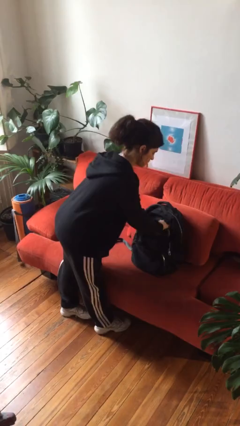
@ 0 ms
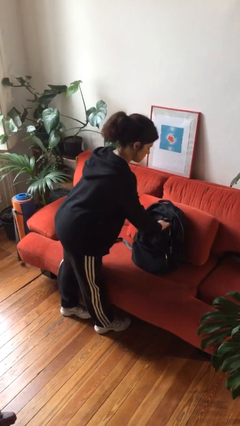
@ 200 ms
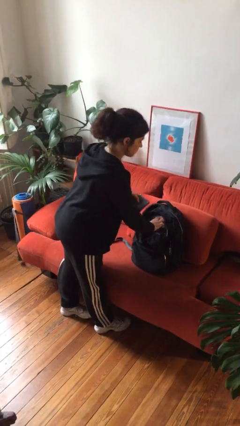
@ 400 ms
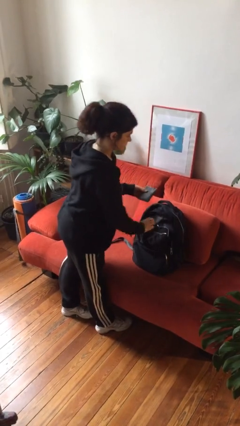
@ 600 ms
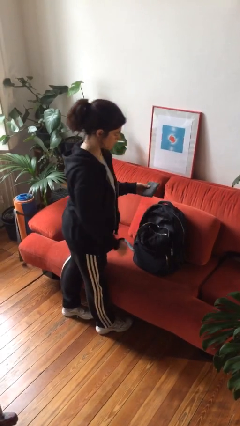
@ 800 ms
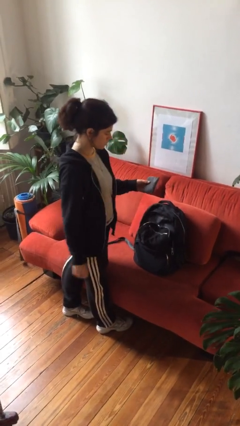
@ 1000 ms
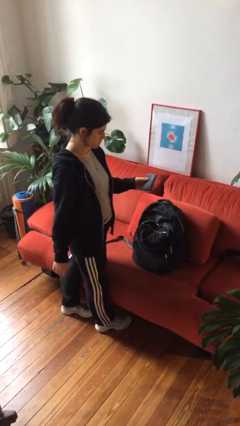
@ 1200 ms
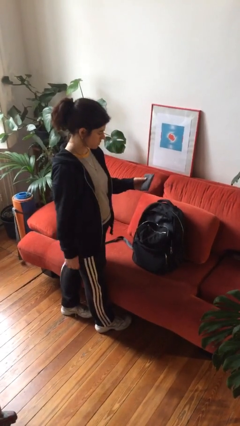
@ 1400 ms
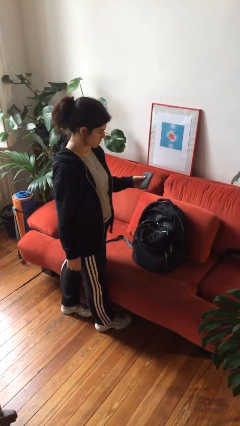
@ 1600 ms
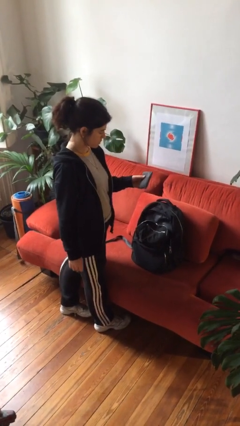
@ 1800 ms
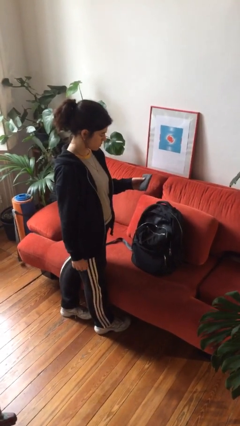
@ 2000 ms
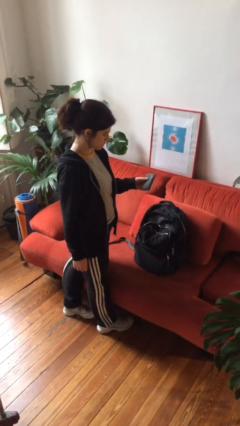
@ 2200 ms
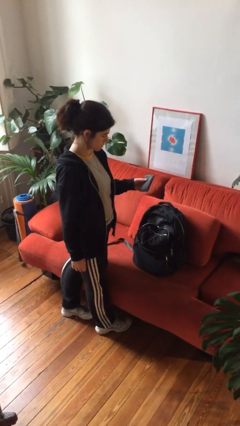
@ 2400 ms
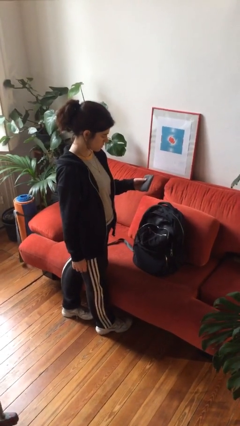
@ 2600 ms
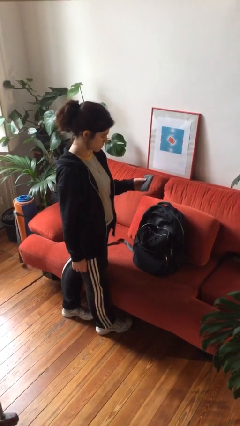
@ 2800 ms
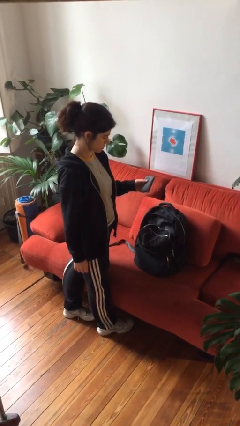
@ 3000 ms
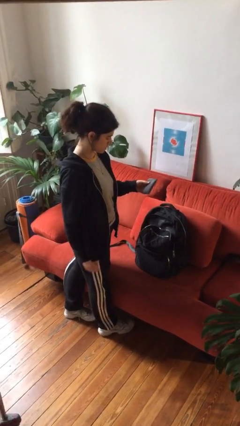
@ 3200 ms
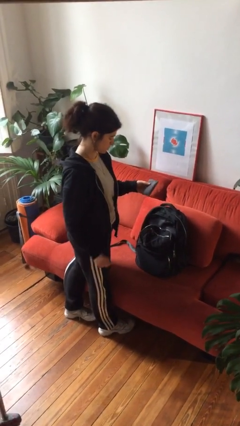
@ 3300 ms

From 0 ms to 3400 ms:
person takes object from backpack

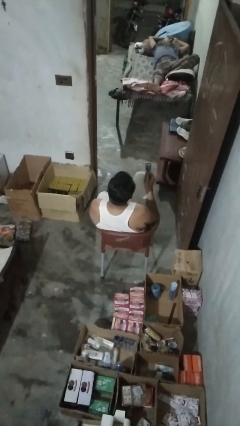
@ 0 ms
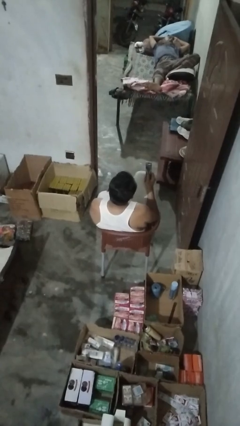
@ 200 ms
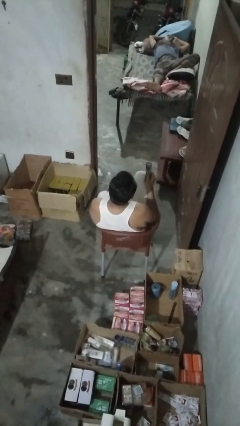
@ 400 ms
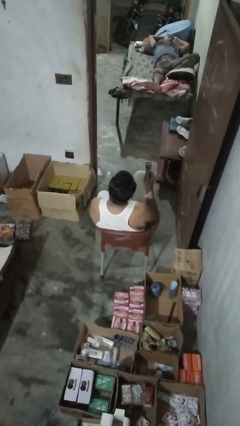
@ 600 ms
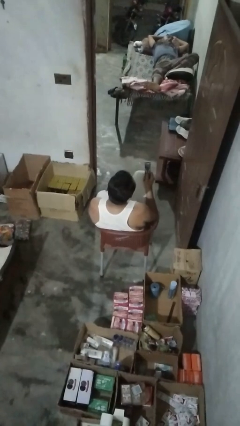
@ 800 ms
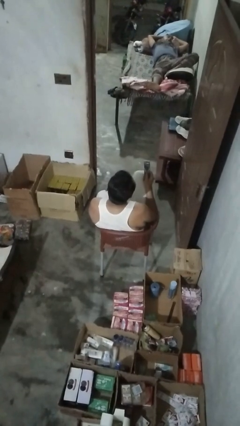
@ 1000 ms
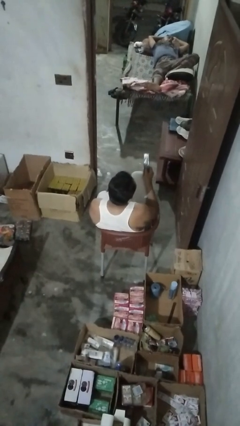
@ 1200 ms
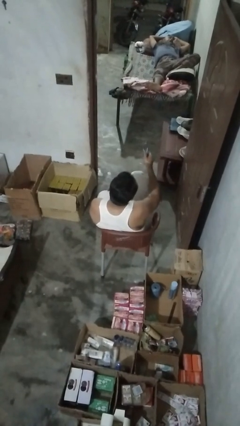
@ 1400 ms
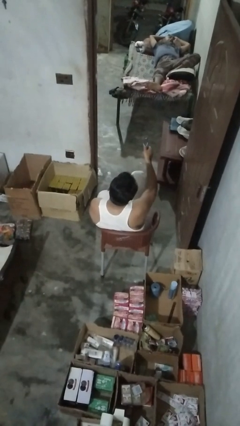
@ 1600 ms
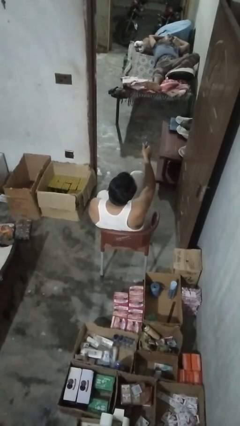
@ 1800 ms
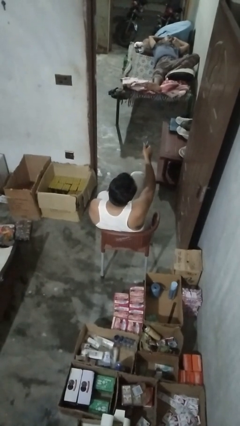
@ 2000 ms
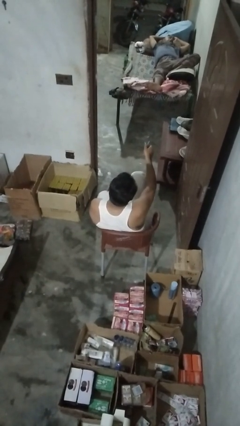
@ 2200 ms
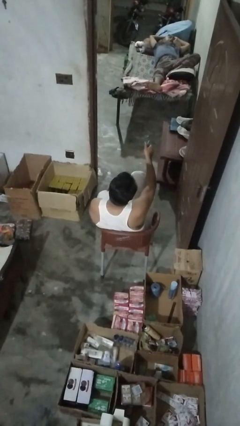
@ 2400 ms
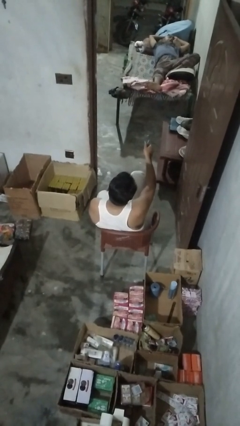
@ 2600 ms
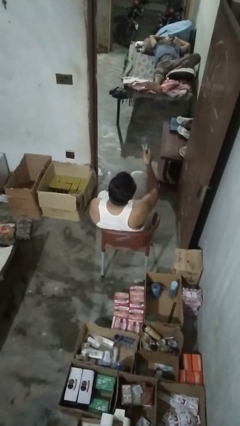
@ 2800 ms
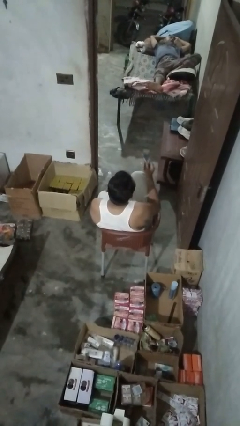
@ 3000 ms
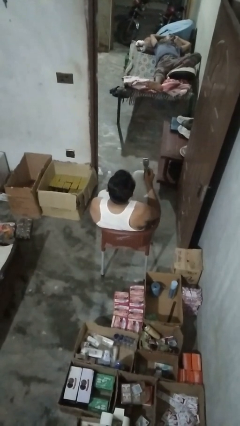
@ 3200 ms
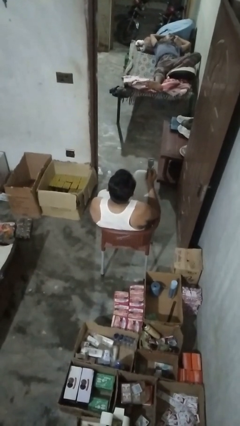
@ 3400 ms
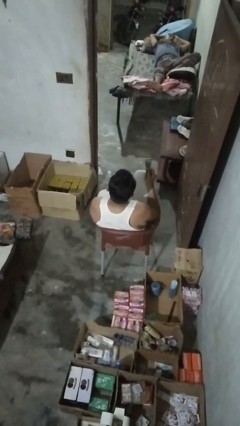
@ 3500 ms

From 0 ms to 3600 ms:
person uses television remote

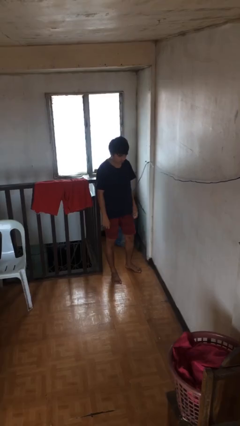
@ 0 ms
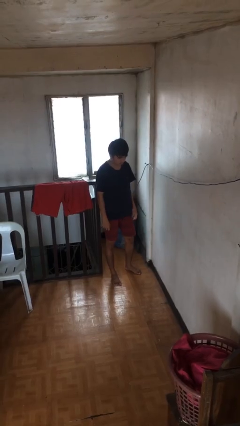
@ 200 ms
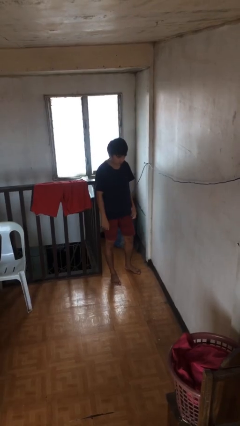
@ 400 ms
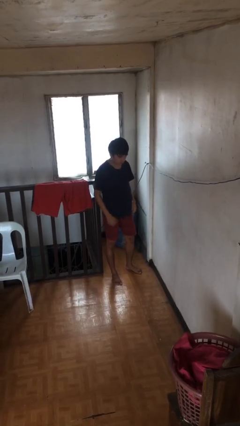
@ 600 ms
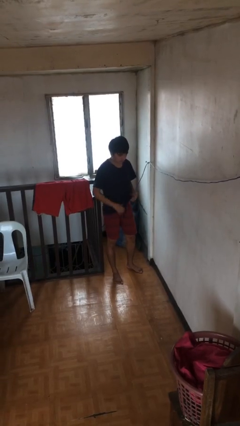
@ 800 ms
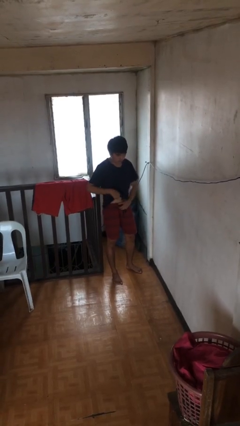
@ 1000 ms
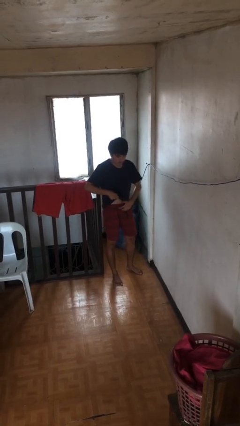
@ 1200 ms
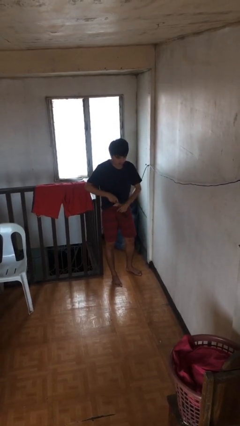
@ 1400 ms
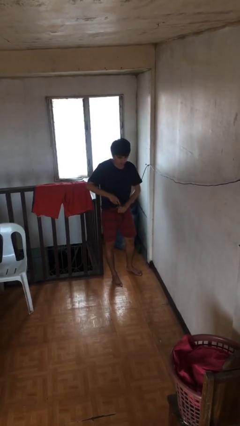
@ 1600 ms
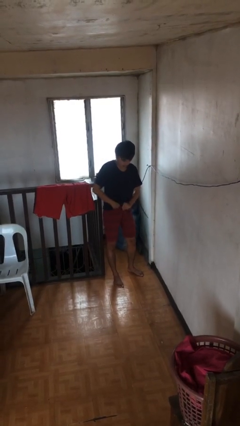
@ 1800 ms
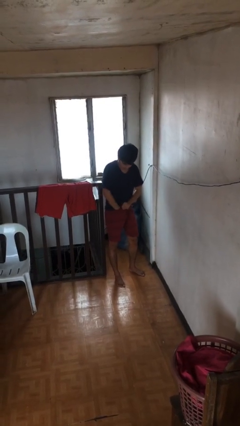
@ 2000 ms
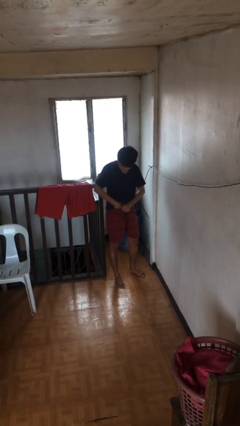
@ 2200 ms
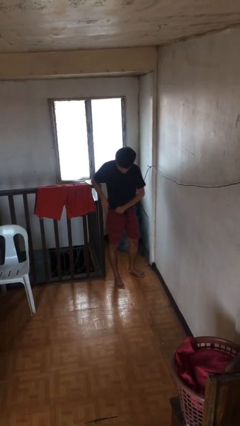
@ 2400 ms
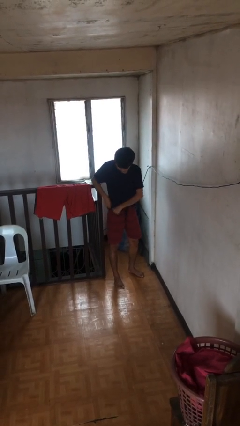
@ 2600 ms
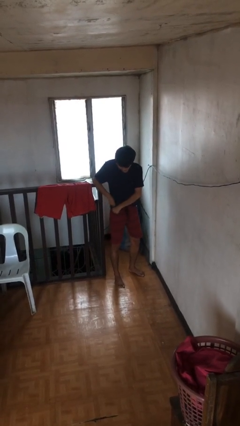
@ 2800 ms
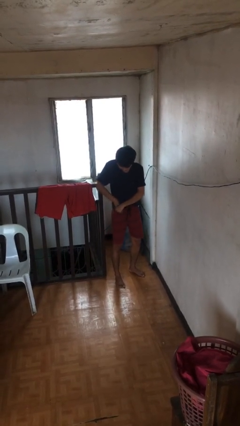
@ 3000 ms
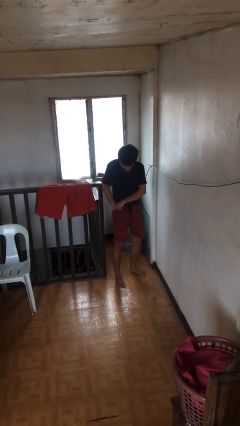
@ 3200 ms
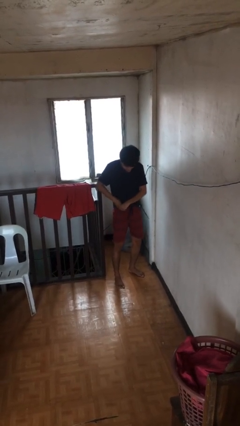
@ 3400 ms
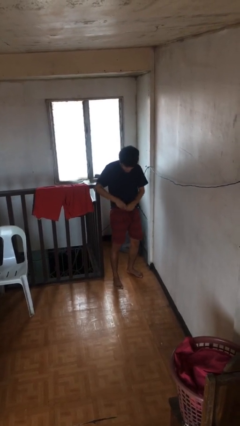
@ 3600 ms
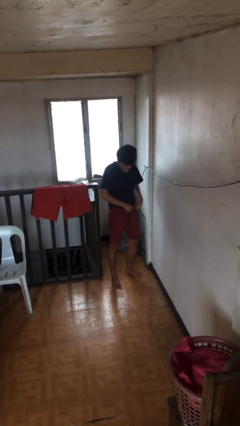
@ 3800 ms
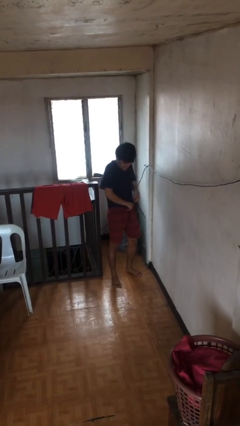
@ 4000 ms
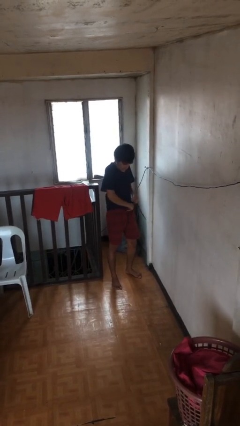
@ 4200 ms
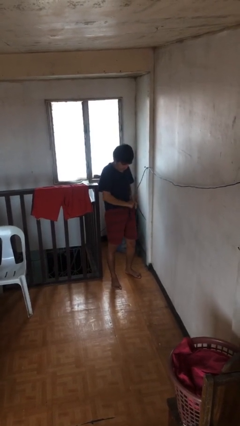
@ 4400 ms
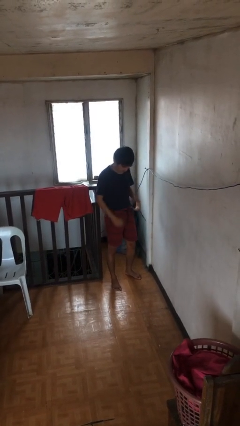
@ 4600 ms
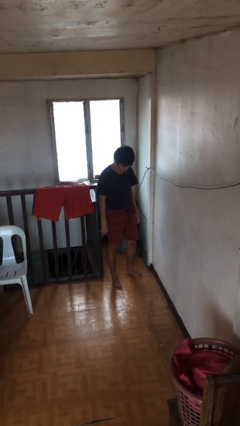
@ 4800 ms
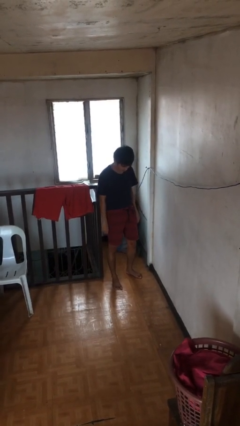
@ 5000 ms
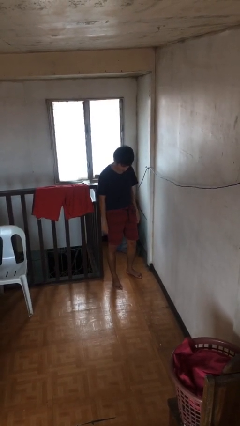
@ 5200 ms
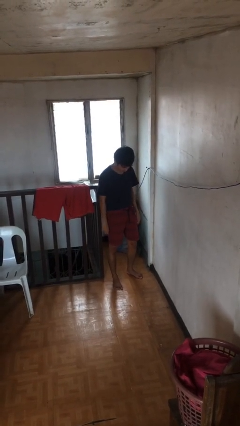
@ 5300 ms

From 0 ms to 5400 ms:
person tucks in shirt

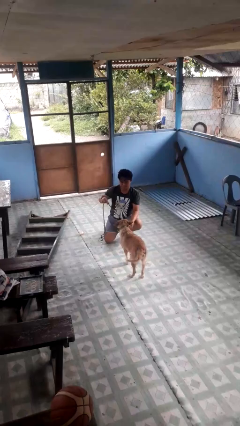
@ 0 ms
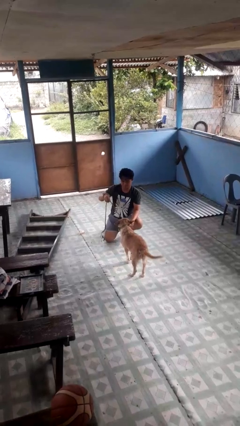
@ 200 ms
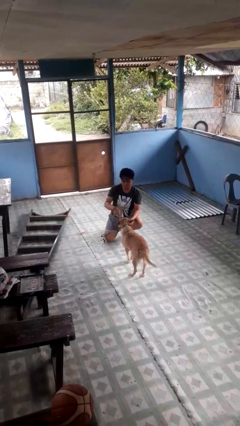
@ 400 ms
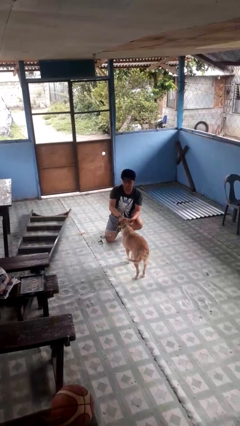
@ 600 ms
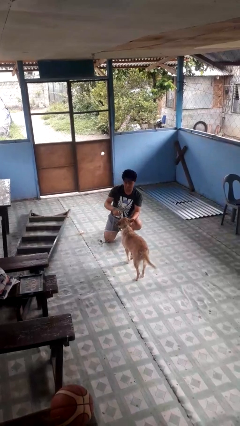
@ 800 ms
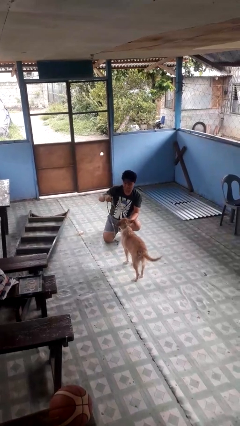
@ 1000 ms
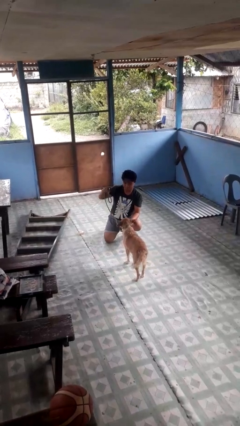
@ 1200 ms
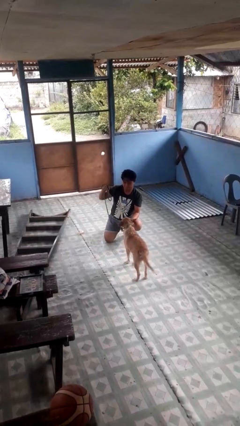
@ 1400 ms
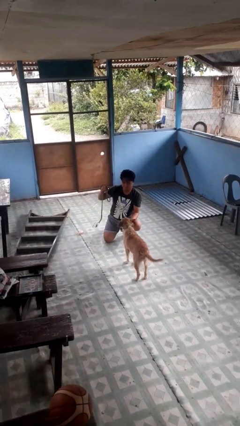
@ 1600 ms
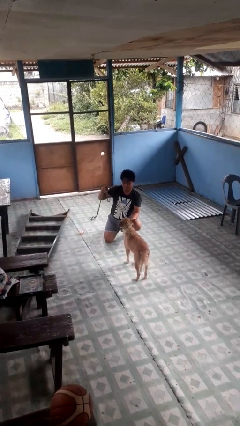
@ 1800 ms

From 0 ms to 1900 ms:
person unattaches leash from dog

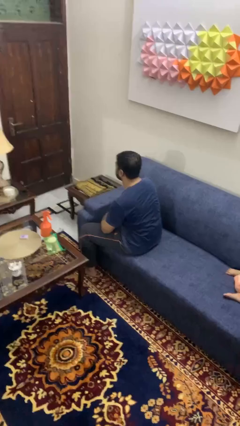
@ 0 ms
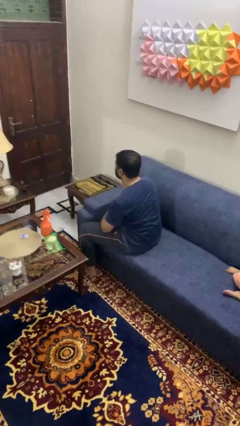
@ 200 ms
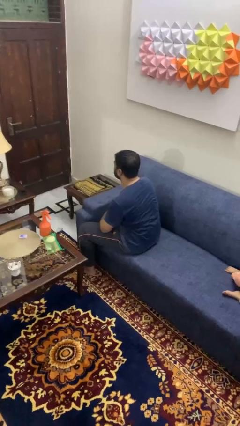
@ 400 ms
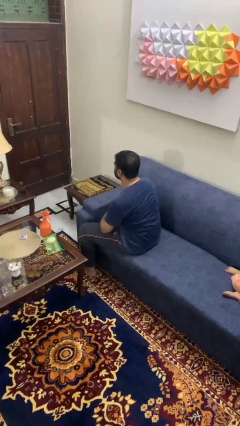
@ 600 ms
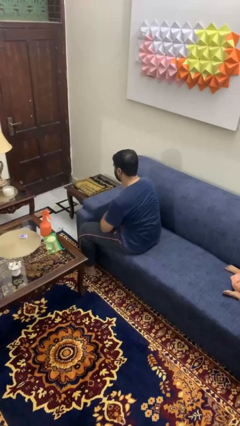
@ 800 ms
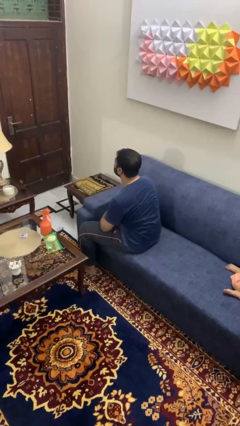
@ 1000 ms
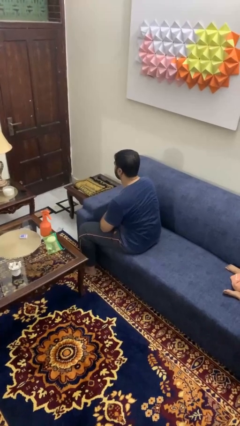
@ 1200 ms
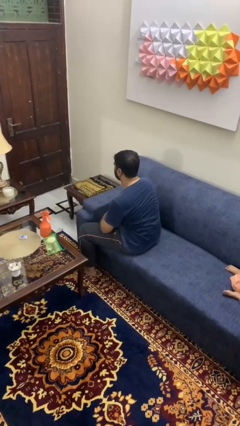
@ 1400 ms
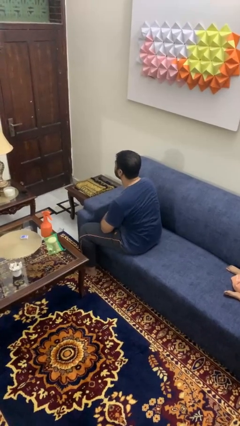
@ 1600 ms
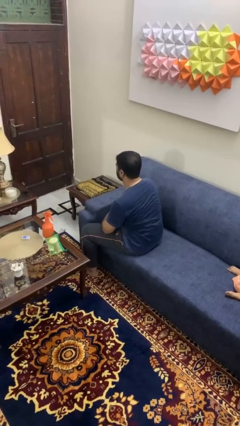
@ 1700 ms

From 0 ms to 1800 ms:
person nods head

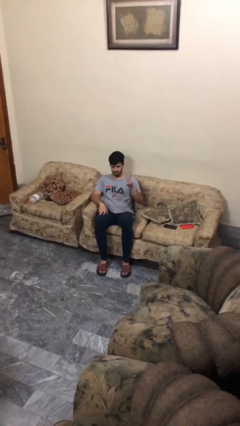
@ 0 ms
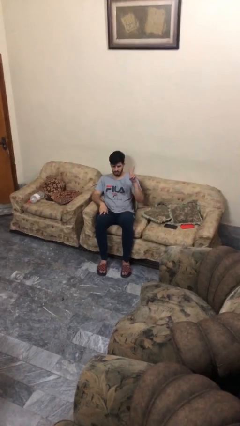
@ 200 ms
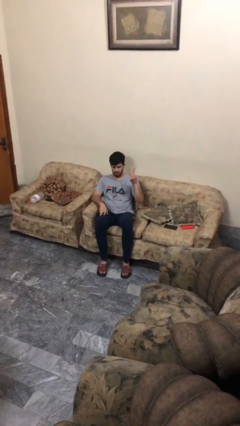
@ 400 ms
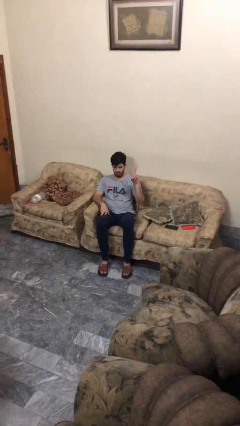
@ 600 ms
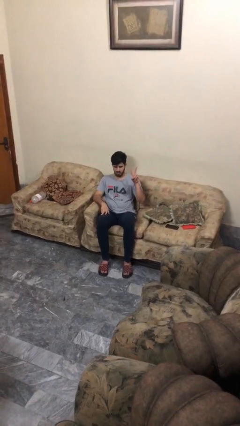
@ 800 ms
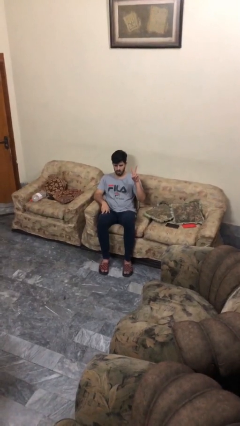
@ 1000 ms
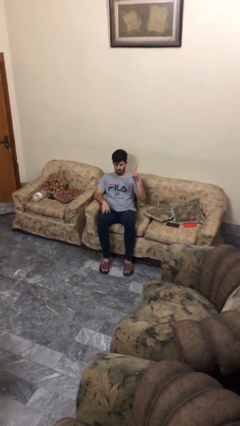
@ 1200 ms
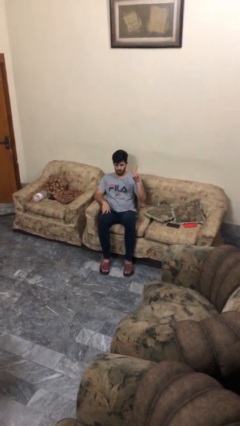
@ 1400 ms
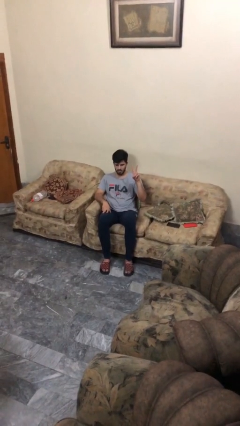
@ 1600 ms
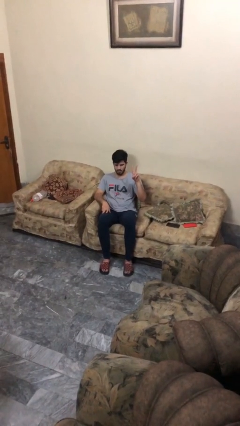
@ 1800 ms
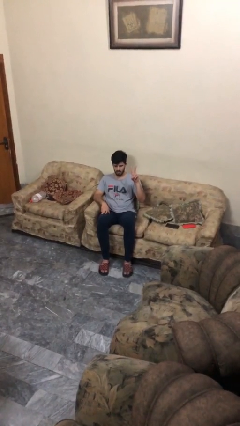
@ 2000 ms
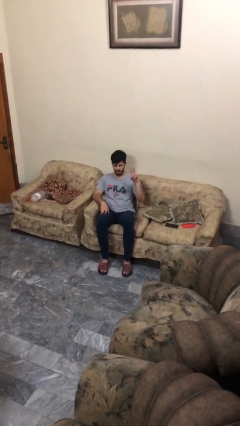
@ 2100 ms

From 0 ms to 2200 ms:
person gestures peace
